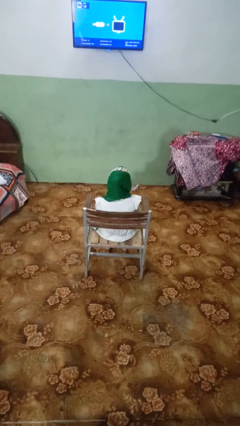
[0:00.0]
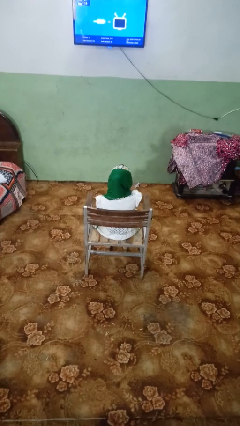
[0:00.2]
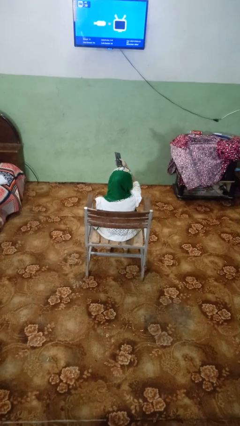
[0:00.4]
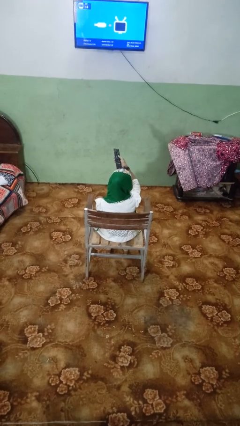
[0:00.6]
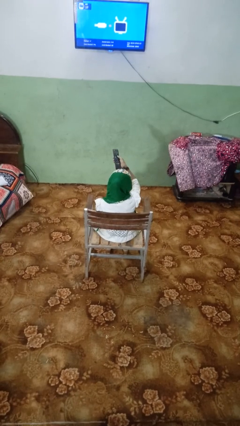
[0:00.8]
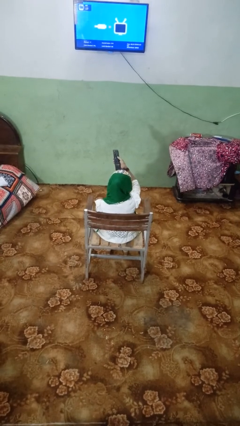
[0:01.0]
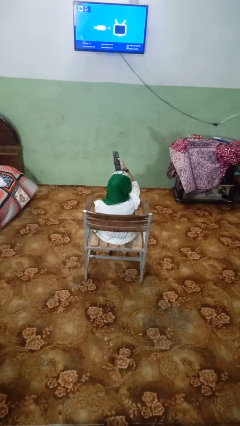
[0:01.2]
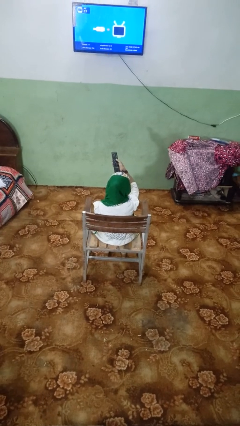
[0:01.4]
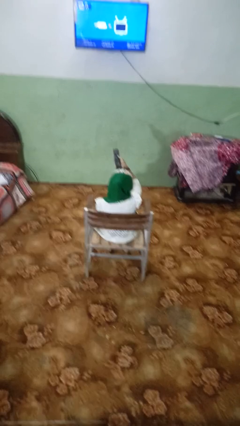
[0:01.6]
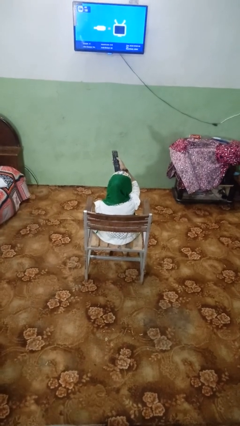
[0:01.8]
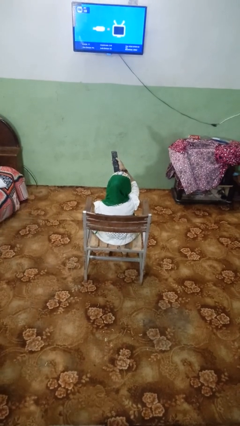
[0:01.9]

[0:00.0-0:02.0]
person uses television remote

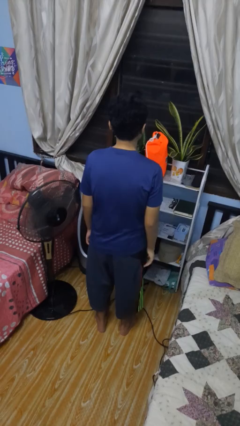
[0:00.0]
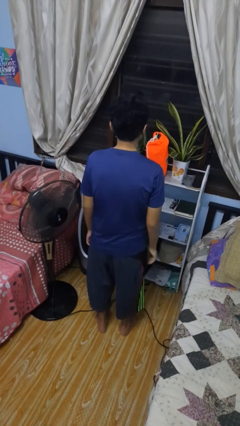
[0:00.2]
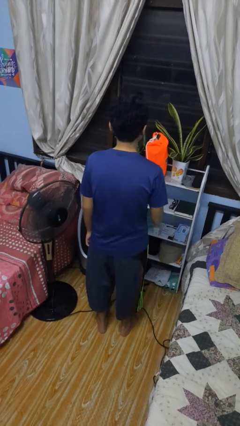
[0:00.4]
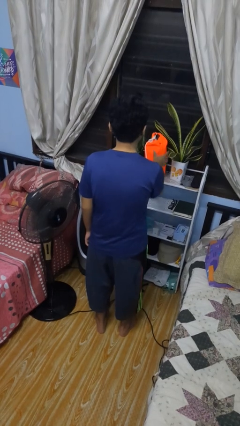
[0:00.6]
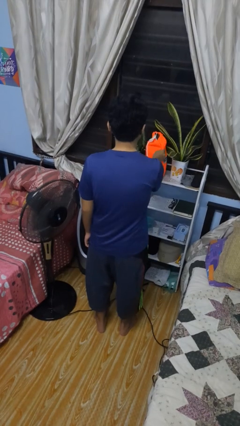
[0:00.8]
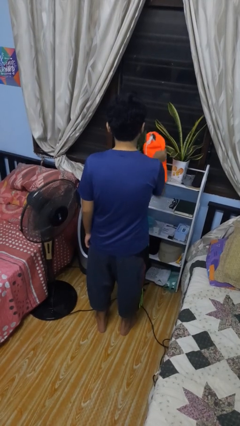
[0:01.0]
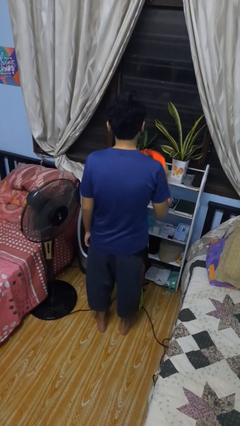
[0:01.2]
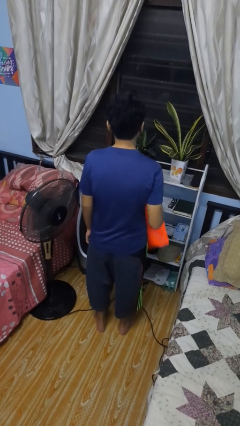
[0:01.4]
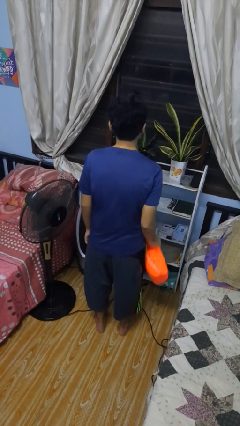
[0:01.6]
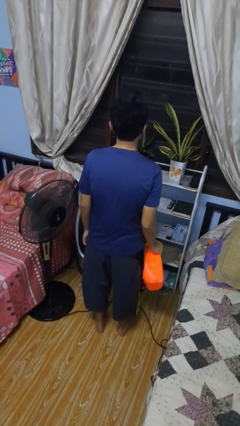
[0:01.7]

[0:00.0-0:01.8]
person picks up object from countertop

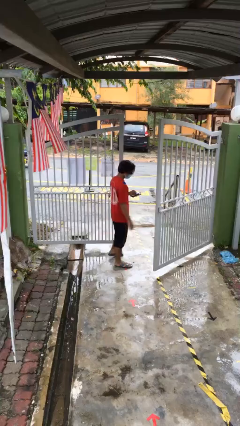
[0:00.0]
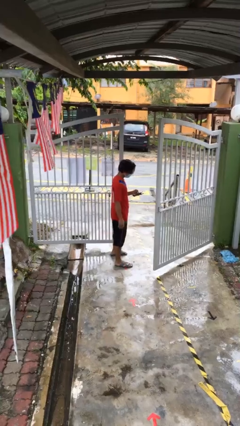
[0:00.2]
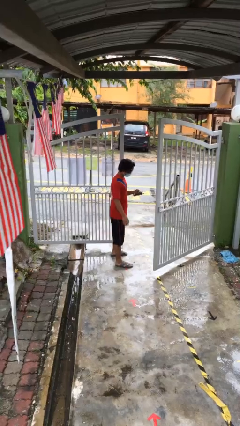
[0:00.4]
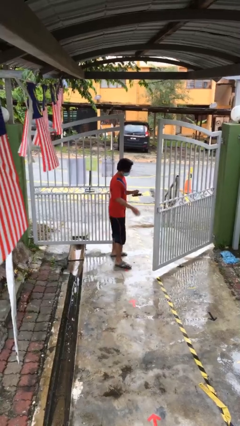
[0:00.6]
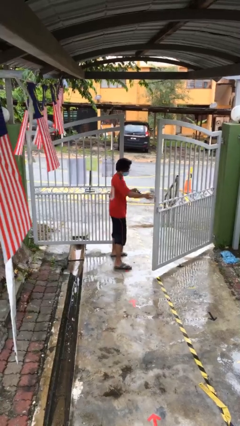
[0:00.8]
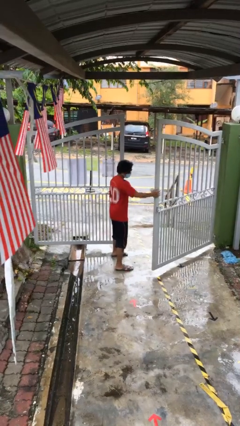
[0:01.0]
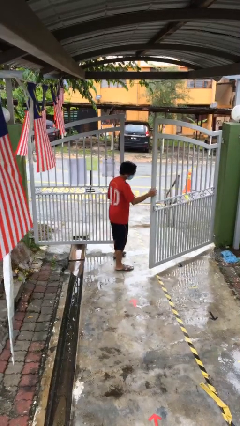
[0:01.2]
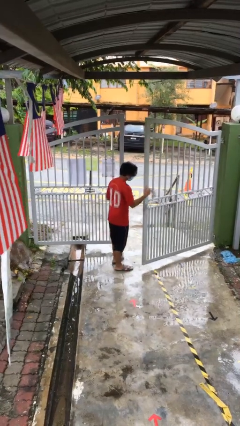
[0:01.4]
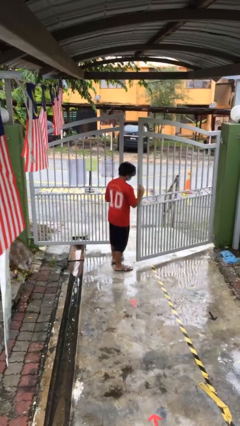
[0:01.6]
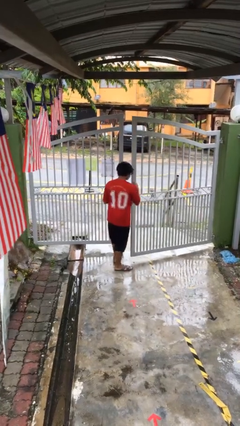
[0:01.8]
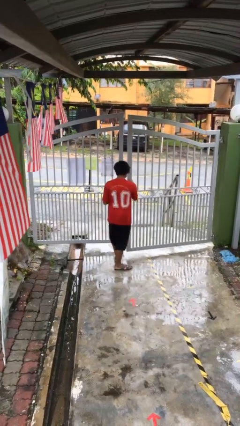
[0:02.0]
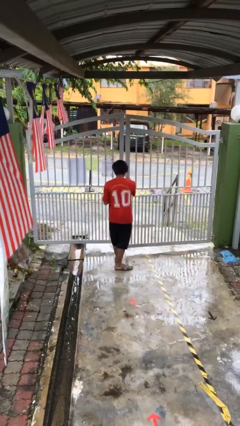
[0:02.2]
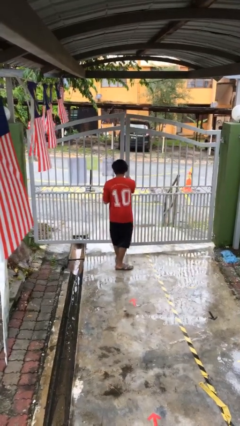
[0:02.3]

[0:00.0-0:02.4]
person closes facility door

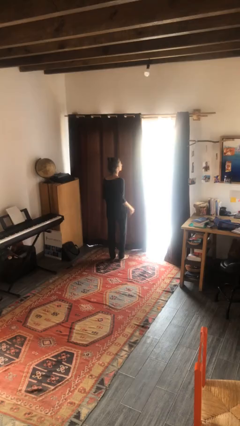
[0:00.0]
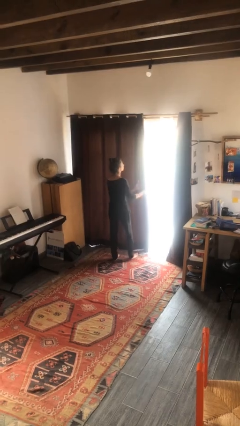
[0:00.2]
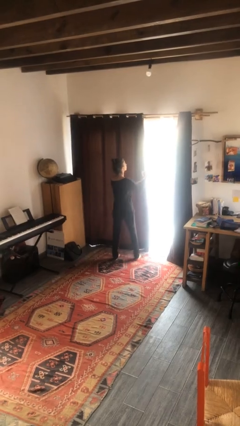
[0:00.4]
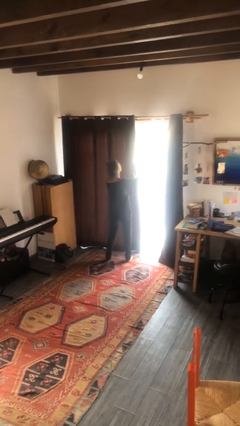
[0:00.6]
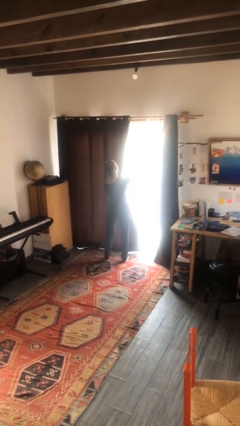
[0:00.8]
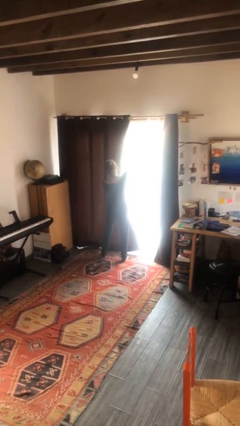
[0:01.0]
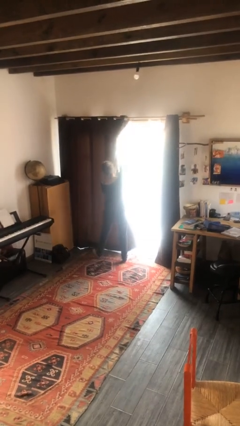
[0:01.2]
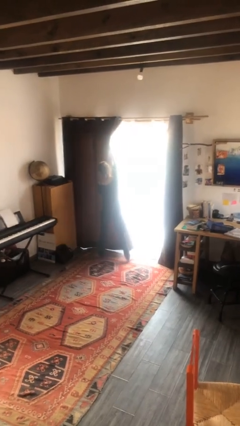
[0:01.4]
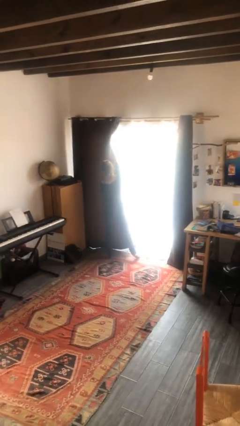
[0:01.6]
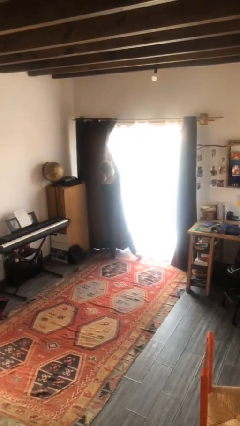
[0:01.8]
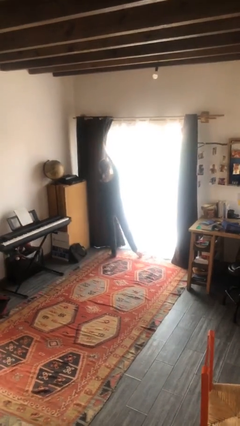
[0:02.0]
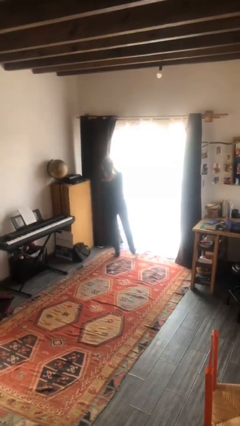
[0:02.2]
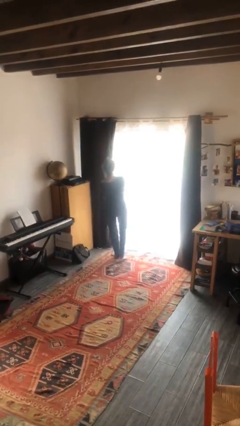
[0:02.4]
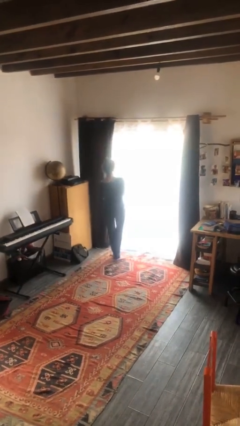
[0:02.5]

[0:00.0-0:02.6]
person opens curtains

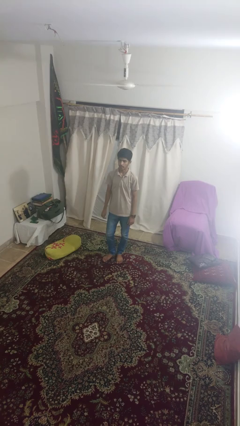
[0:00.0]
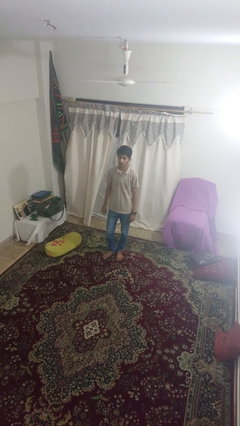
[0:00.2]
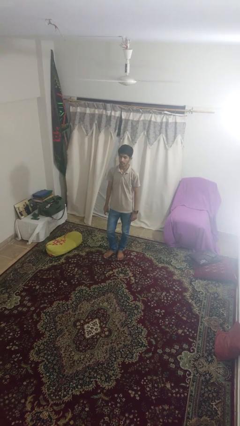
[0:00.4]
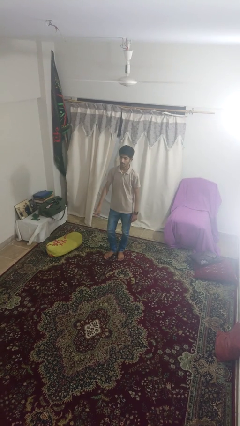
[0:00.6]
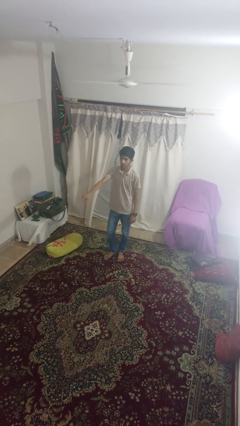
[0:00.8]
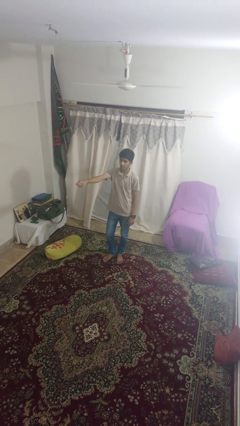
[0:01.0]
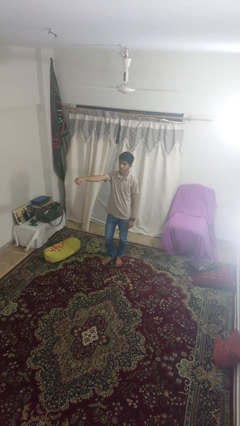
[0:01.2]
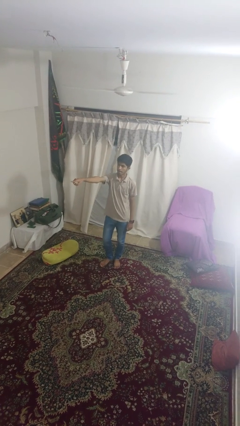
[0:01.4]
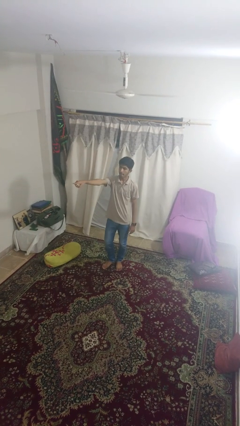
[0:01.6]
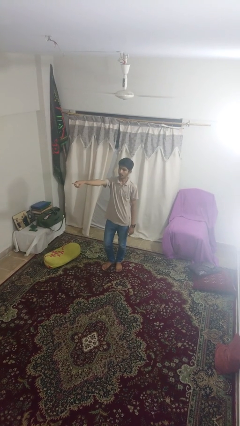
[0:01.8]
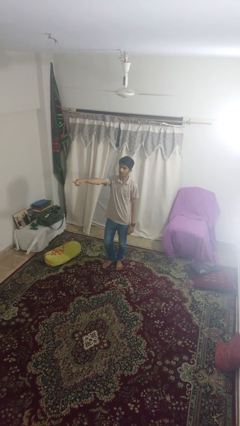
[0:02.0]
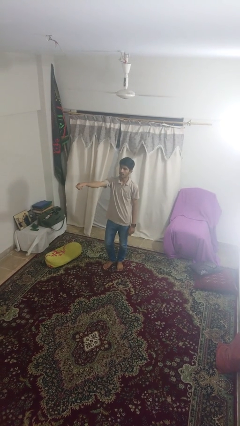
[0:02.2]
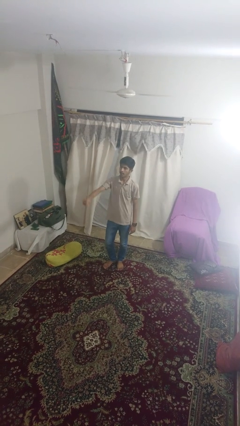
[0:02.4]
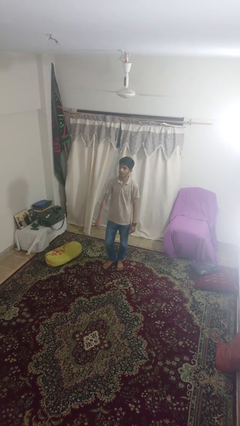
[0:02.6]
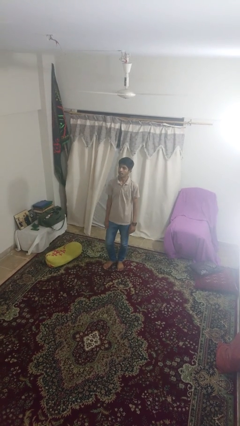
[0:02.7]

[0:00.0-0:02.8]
person points at person

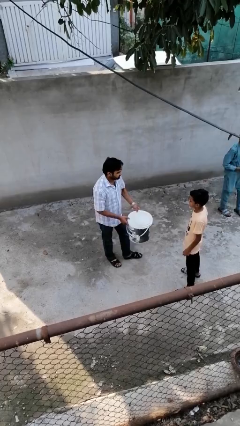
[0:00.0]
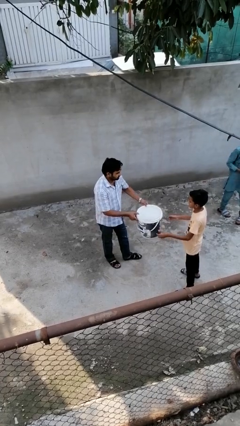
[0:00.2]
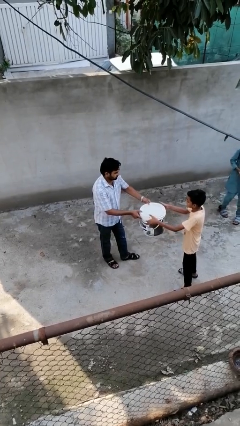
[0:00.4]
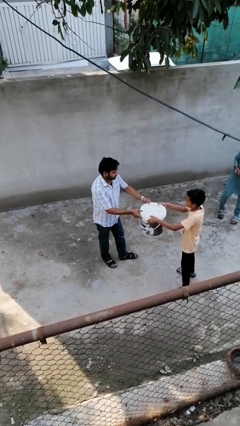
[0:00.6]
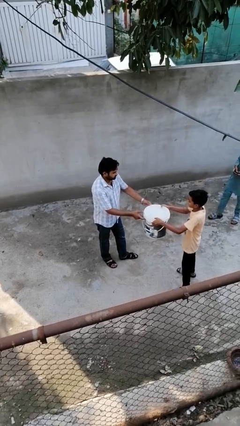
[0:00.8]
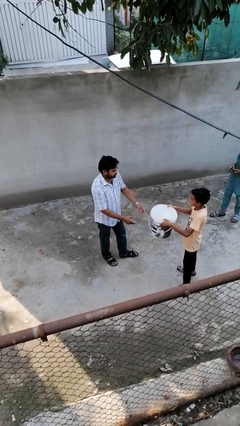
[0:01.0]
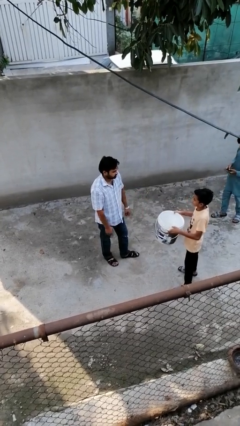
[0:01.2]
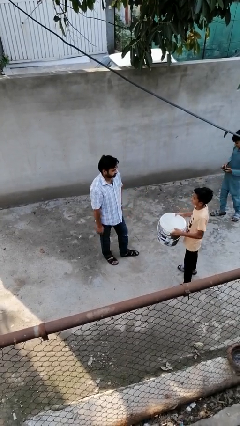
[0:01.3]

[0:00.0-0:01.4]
person transfers object to person

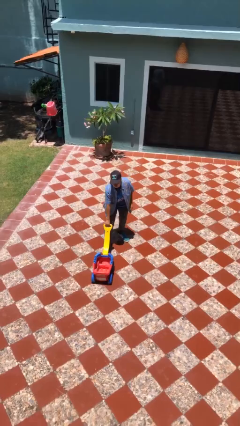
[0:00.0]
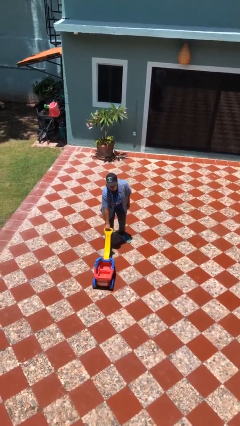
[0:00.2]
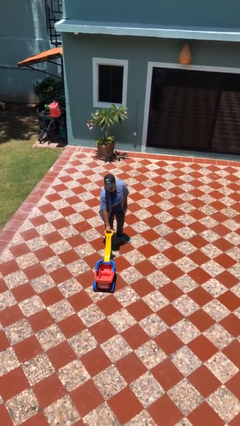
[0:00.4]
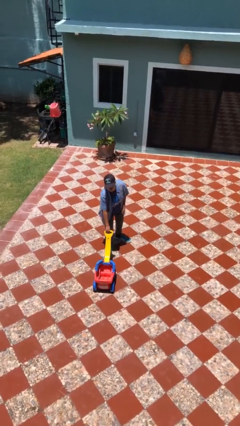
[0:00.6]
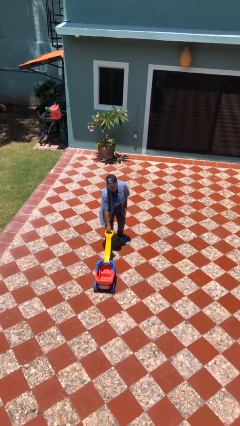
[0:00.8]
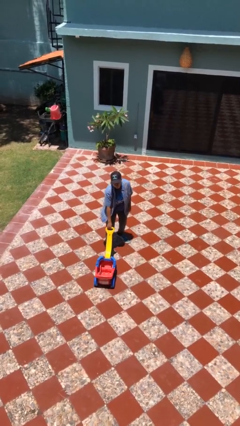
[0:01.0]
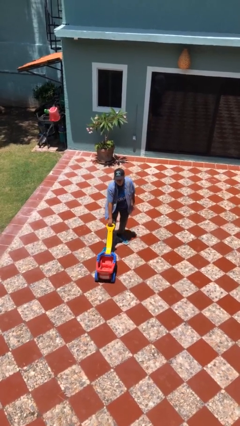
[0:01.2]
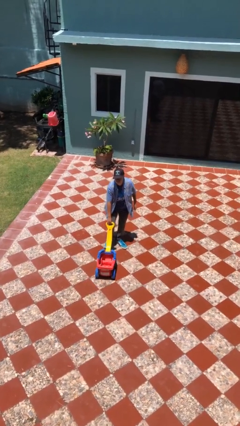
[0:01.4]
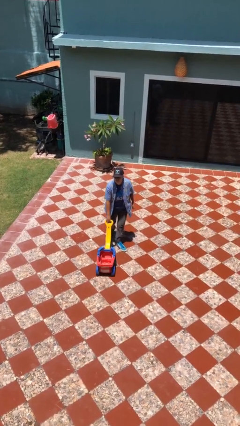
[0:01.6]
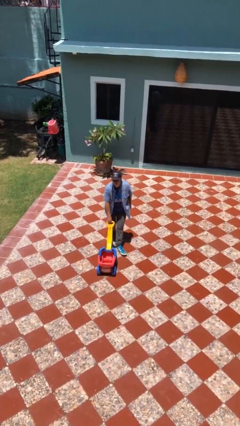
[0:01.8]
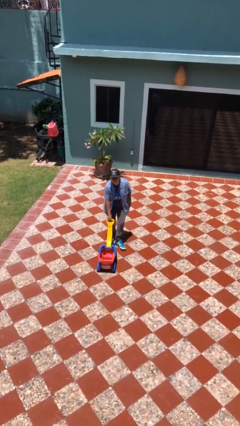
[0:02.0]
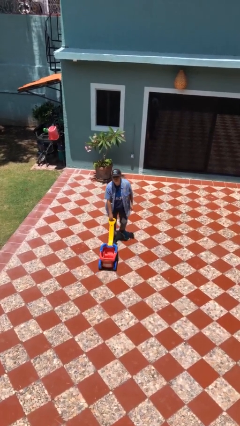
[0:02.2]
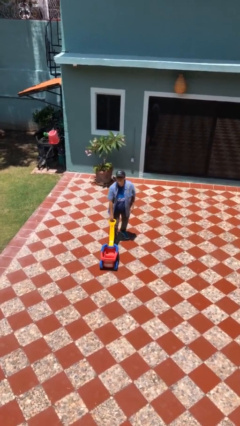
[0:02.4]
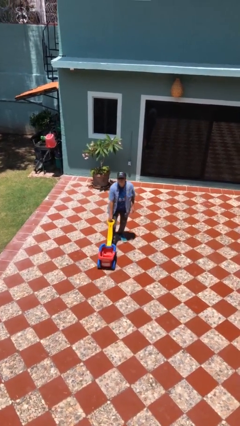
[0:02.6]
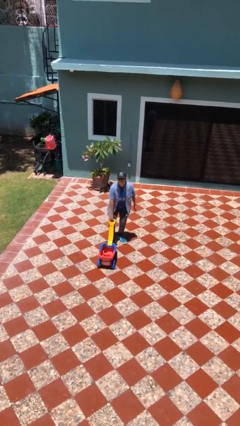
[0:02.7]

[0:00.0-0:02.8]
person pulls wheeled cart

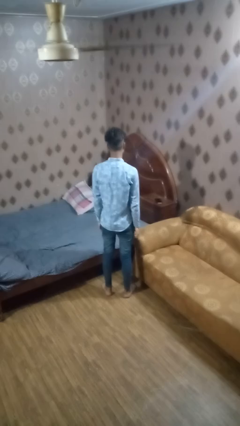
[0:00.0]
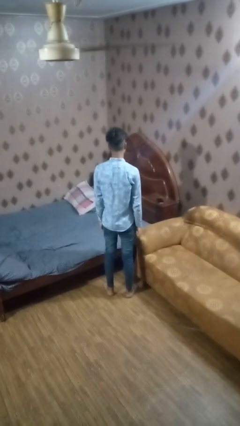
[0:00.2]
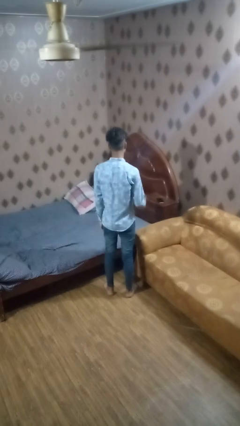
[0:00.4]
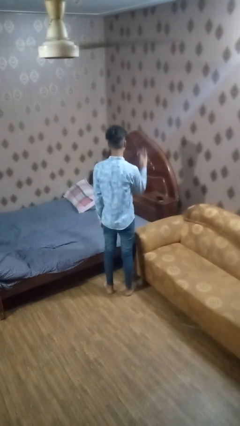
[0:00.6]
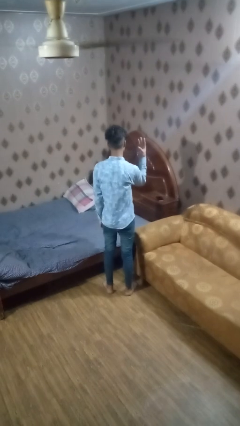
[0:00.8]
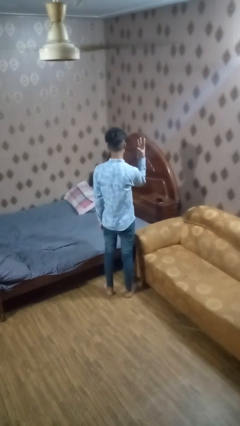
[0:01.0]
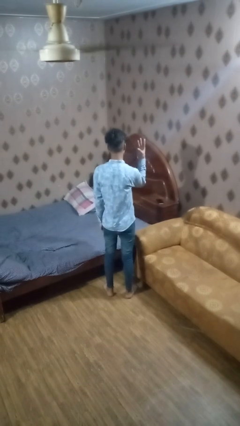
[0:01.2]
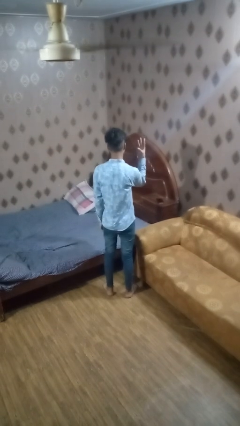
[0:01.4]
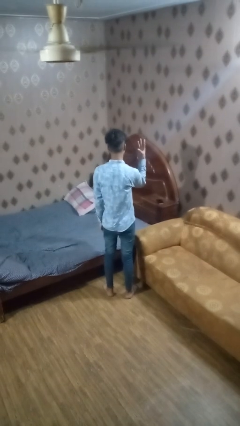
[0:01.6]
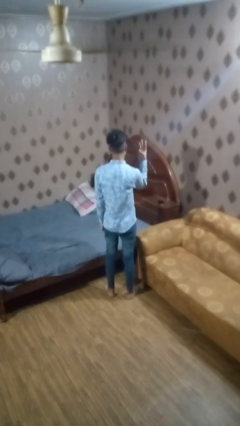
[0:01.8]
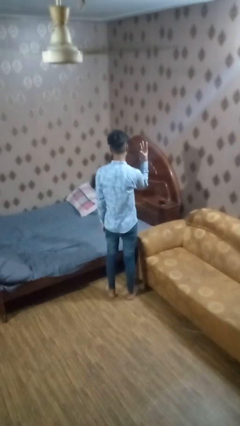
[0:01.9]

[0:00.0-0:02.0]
person gestures number three
